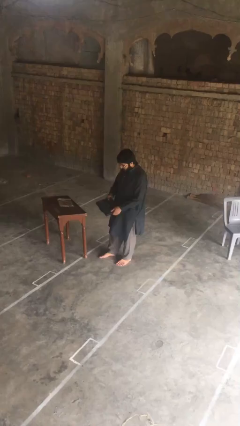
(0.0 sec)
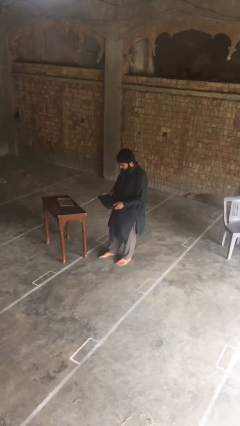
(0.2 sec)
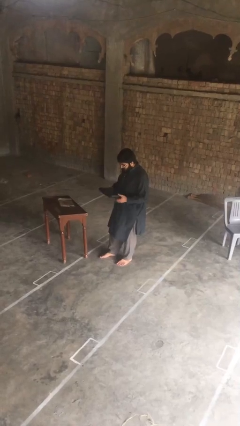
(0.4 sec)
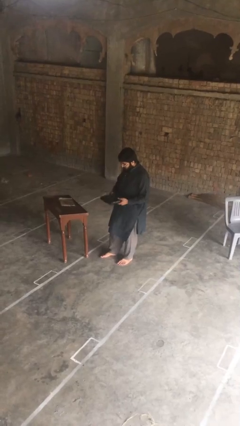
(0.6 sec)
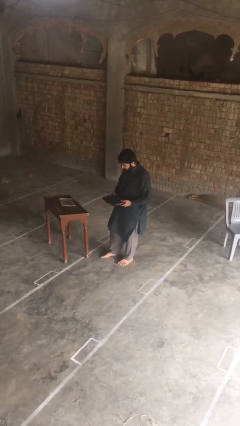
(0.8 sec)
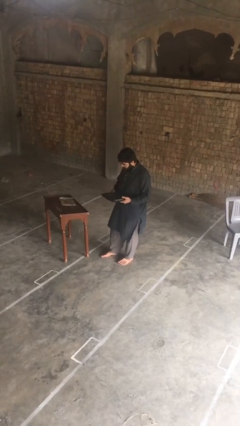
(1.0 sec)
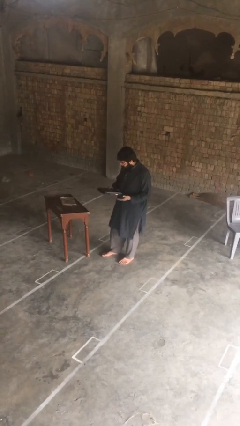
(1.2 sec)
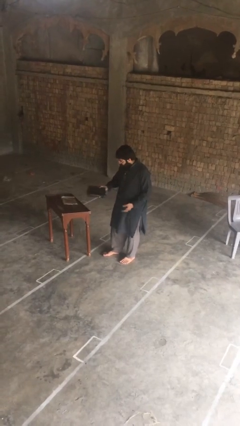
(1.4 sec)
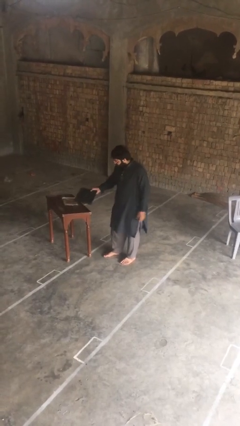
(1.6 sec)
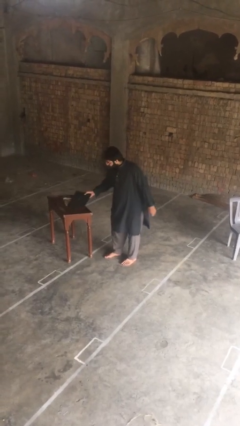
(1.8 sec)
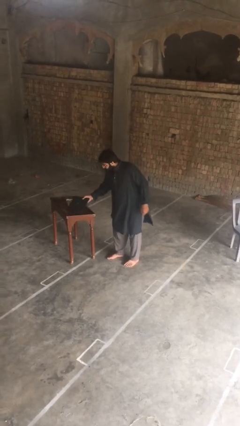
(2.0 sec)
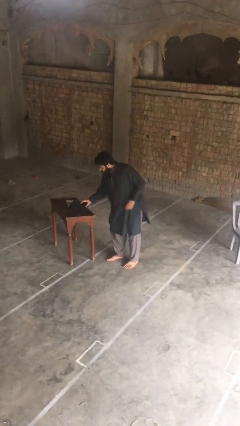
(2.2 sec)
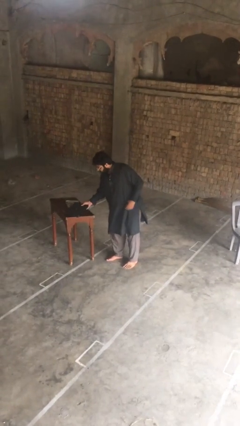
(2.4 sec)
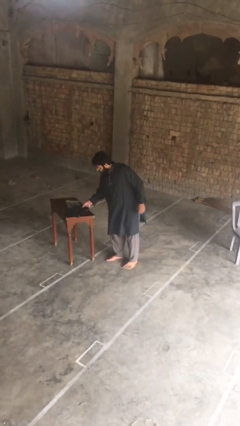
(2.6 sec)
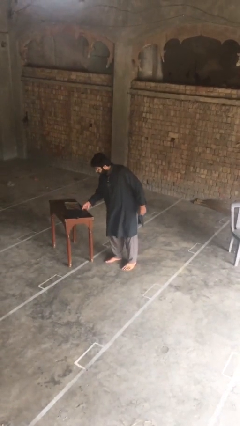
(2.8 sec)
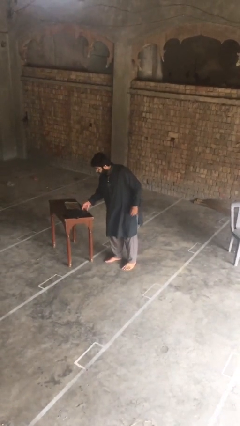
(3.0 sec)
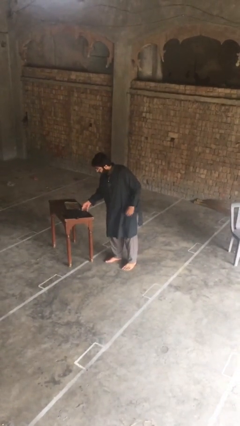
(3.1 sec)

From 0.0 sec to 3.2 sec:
person puts down object on table

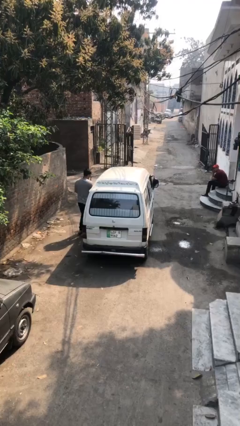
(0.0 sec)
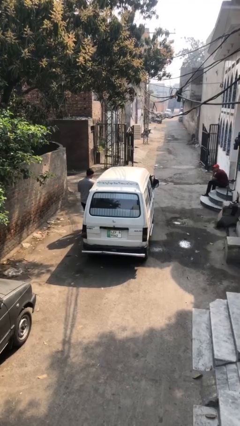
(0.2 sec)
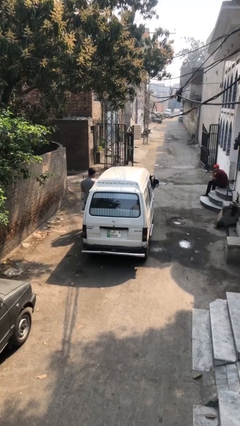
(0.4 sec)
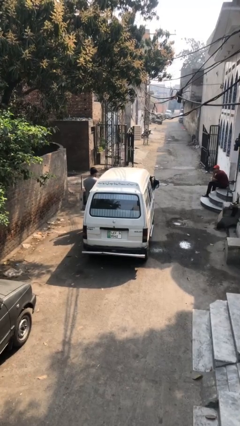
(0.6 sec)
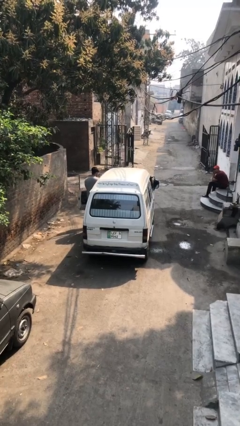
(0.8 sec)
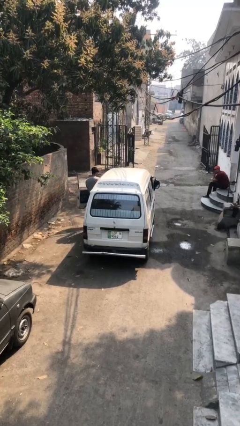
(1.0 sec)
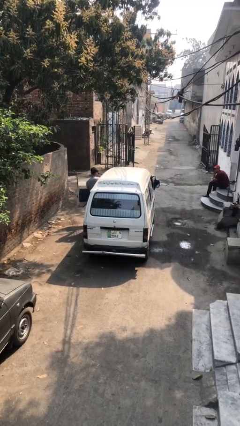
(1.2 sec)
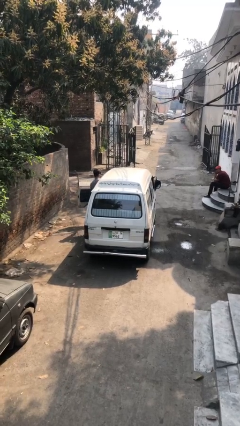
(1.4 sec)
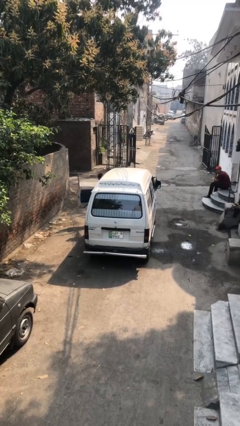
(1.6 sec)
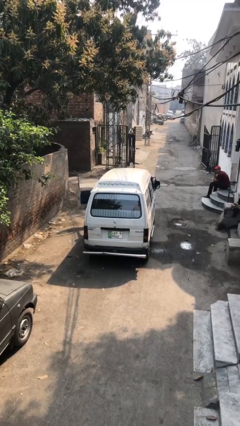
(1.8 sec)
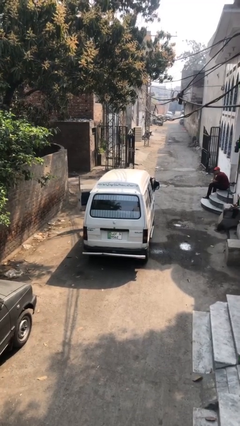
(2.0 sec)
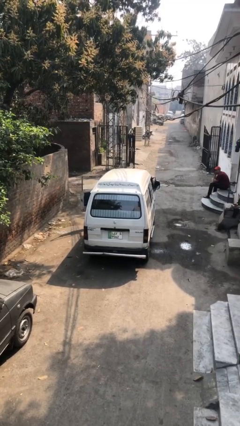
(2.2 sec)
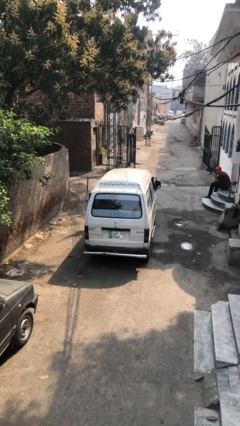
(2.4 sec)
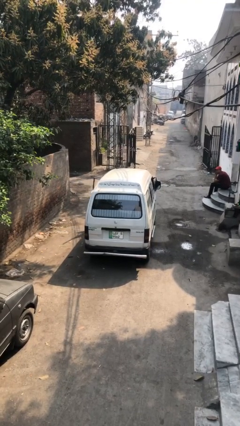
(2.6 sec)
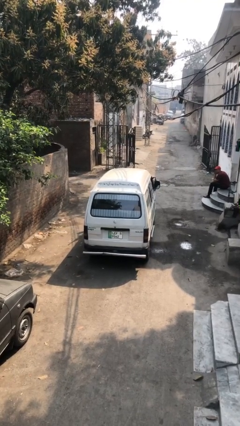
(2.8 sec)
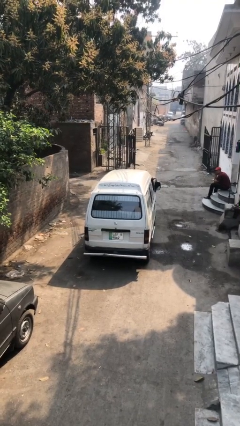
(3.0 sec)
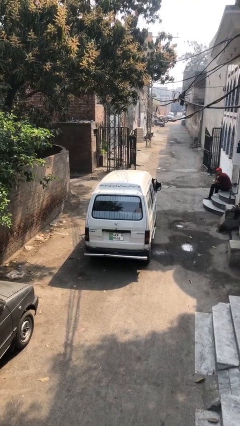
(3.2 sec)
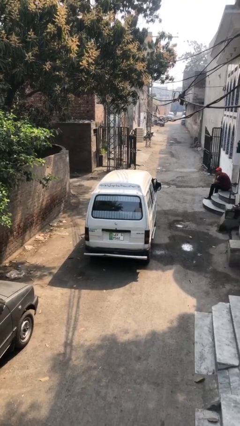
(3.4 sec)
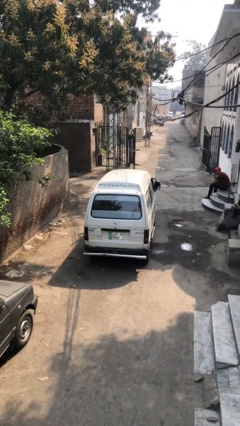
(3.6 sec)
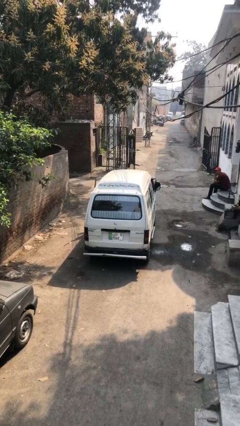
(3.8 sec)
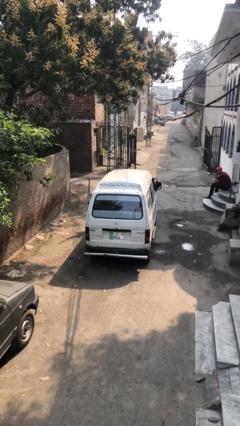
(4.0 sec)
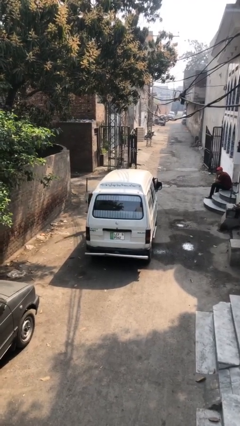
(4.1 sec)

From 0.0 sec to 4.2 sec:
car picks up person

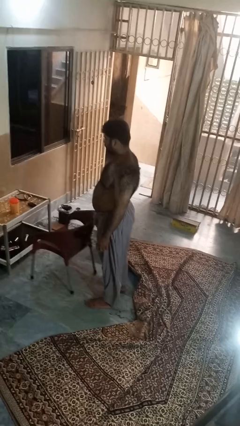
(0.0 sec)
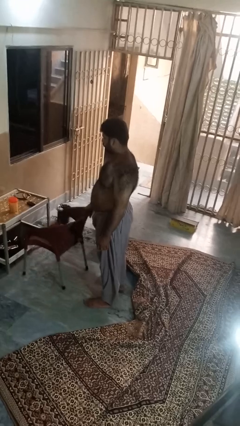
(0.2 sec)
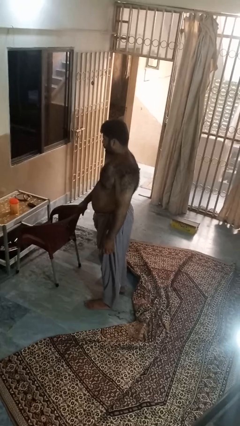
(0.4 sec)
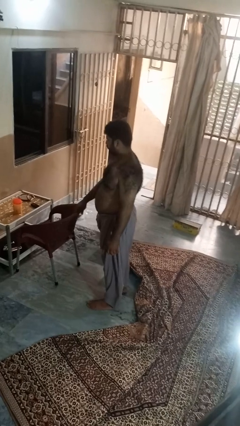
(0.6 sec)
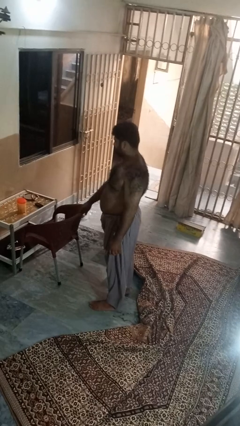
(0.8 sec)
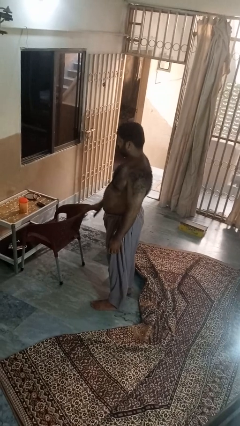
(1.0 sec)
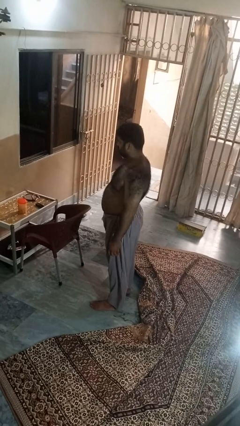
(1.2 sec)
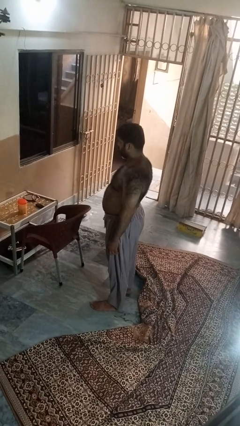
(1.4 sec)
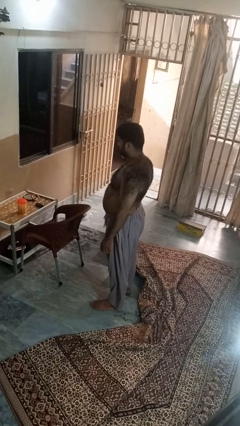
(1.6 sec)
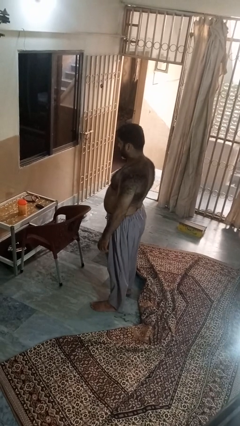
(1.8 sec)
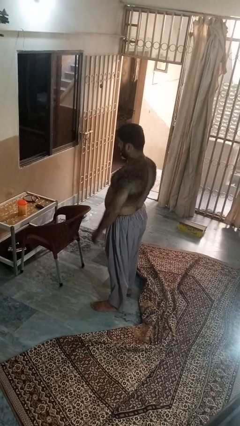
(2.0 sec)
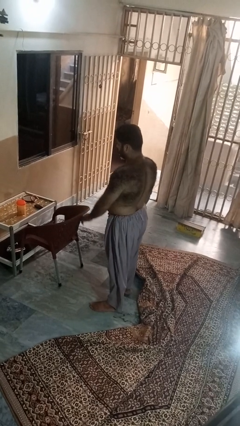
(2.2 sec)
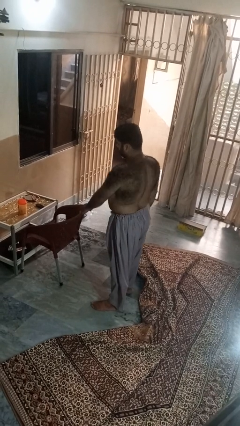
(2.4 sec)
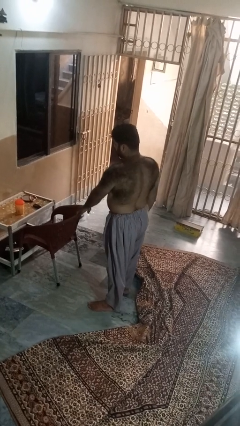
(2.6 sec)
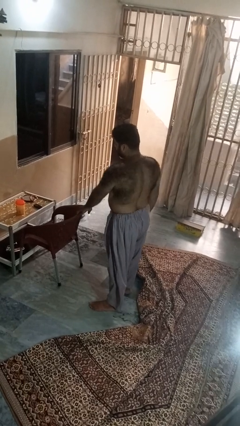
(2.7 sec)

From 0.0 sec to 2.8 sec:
person pushes in chair

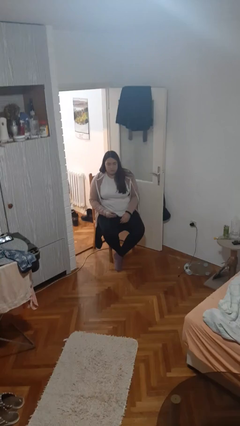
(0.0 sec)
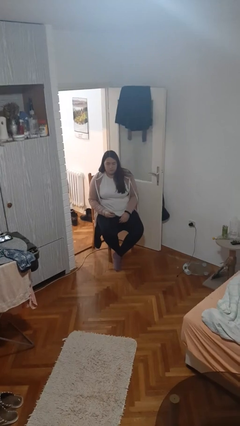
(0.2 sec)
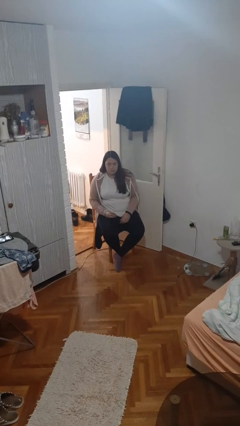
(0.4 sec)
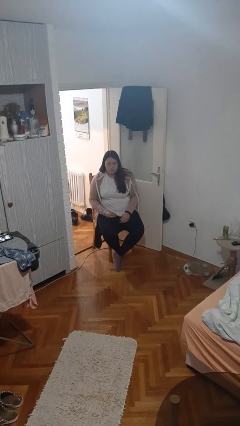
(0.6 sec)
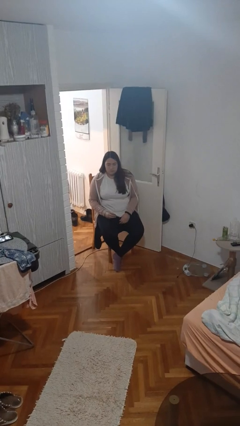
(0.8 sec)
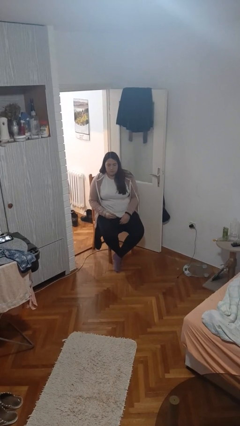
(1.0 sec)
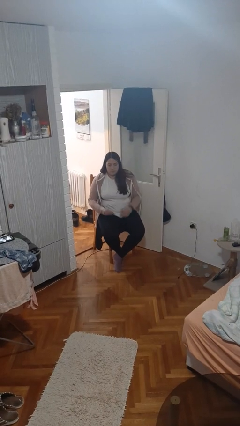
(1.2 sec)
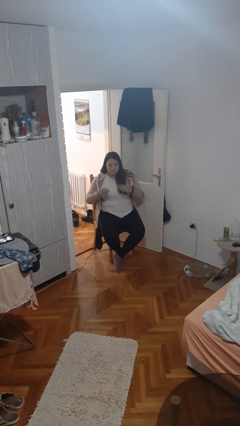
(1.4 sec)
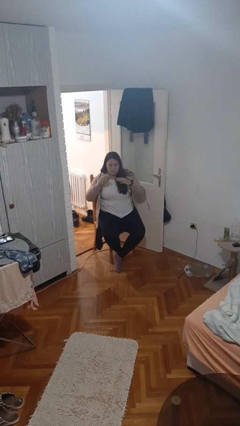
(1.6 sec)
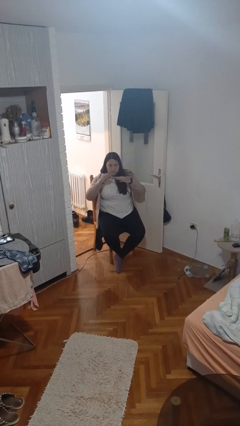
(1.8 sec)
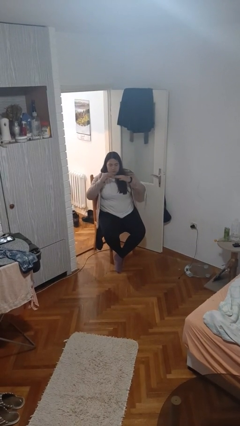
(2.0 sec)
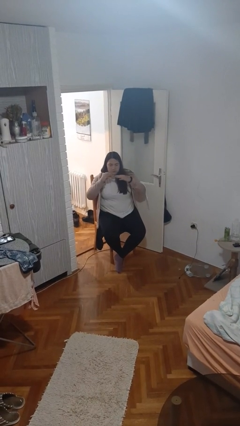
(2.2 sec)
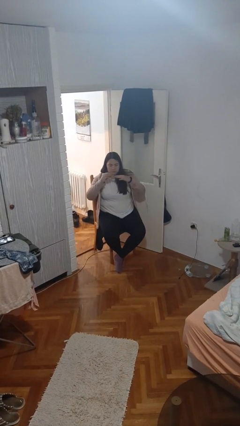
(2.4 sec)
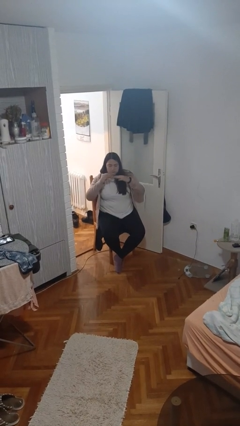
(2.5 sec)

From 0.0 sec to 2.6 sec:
person clips fingernails

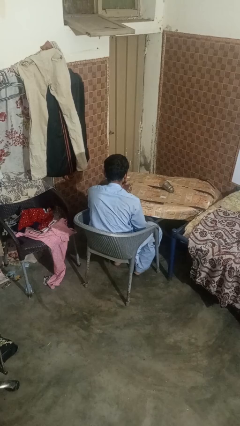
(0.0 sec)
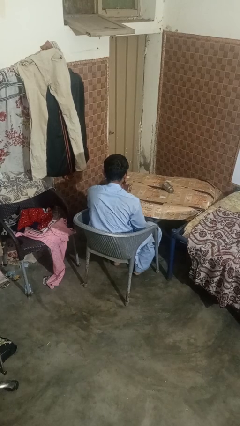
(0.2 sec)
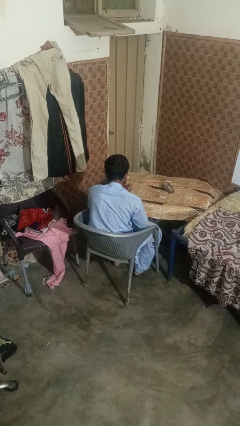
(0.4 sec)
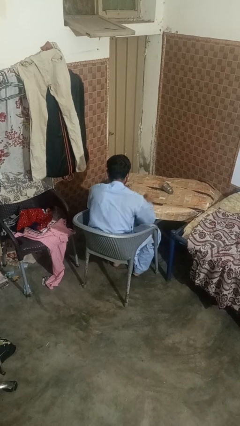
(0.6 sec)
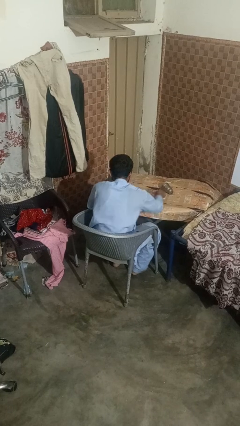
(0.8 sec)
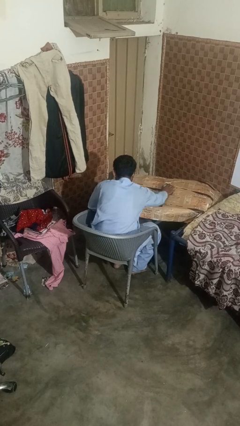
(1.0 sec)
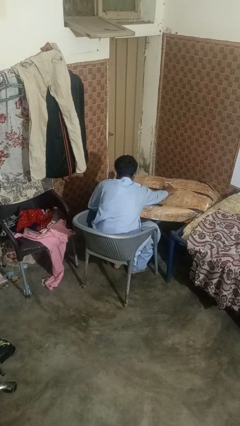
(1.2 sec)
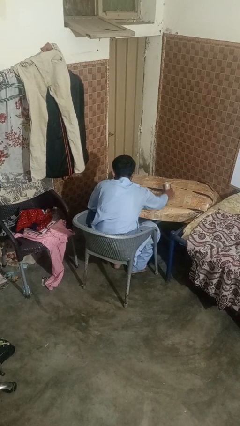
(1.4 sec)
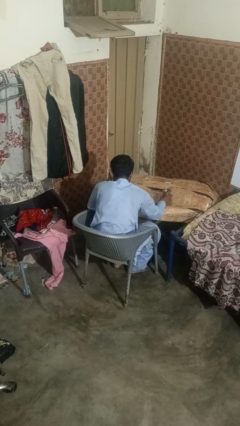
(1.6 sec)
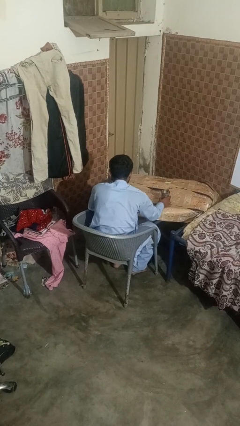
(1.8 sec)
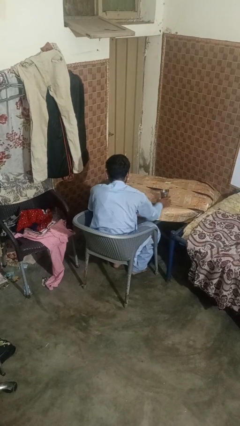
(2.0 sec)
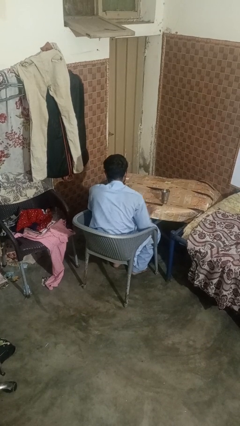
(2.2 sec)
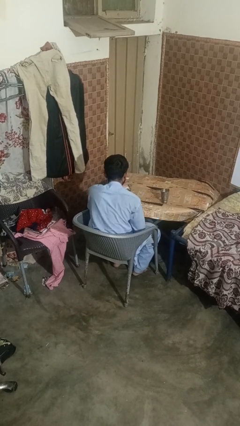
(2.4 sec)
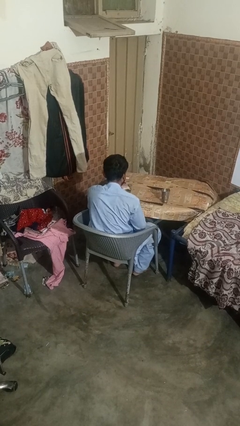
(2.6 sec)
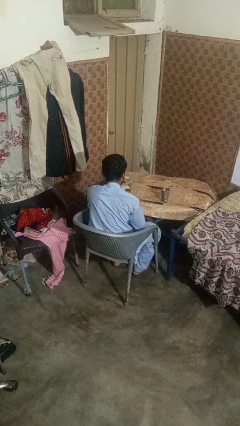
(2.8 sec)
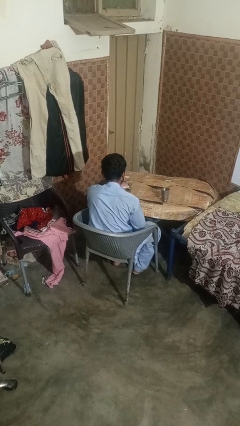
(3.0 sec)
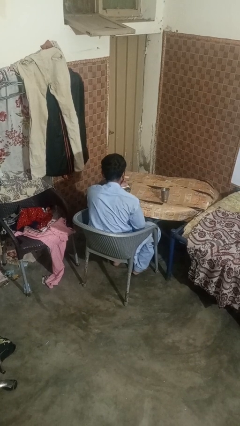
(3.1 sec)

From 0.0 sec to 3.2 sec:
person sets upright glass

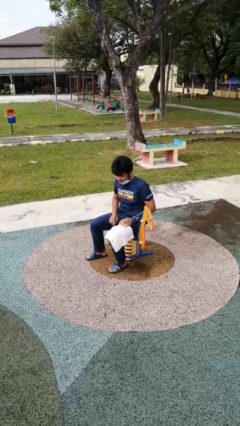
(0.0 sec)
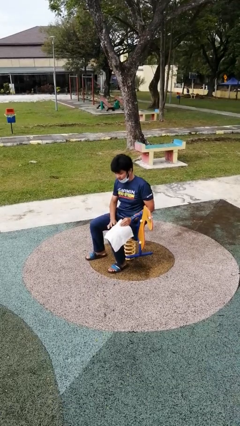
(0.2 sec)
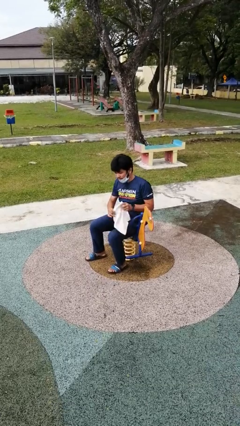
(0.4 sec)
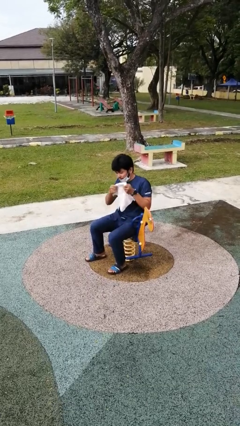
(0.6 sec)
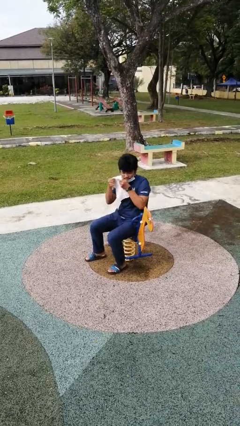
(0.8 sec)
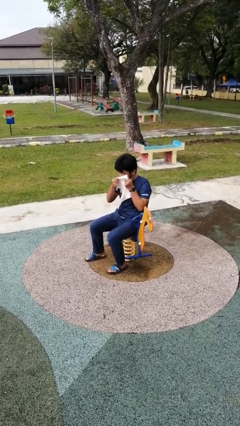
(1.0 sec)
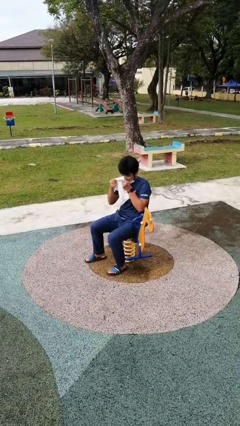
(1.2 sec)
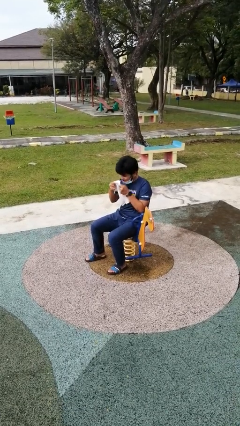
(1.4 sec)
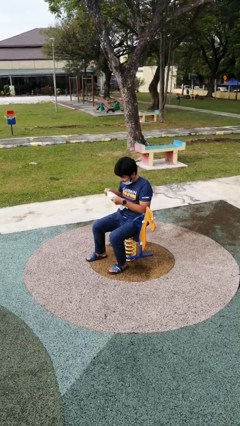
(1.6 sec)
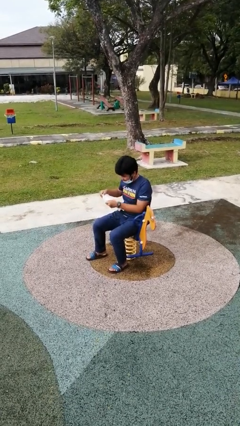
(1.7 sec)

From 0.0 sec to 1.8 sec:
person wipes mouth with napkin
